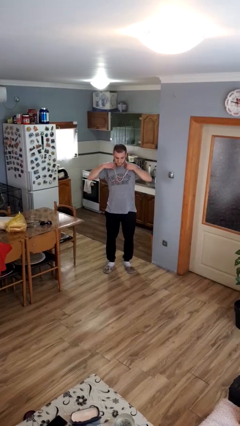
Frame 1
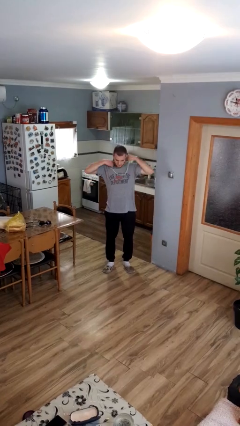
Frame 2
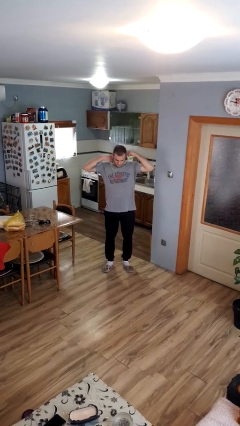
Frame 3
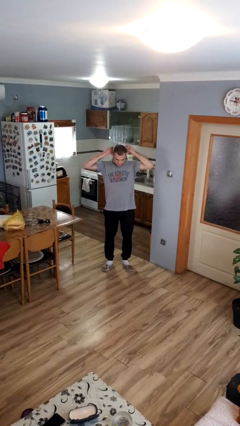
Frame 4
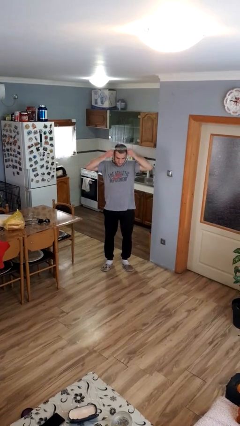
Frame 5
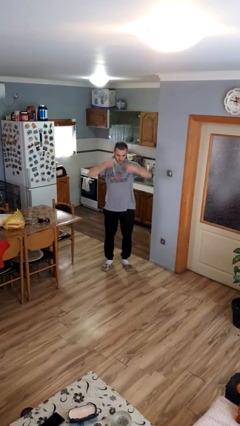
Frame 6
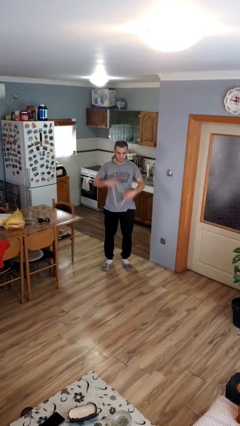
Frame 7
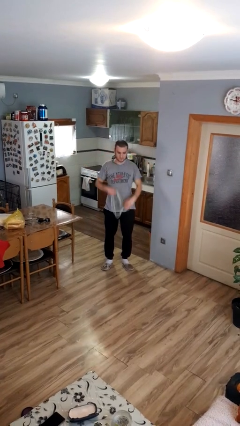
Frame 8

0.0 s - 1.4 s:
person takes off necklace

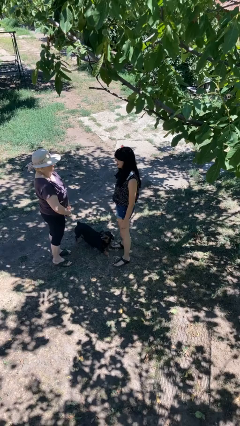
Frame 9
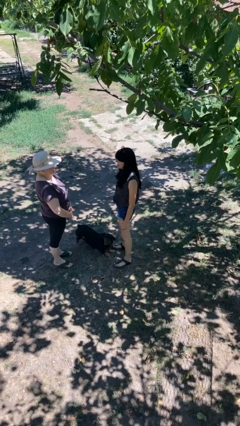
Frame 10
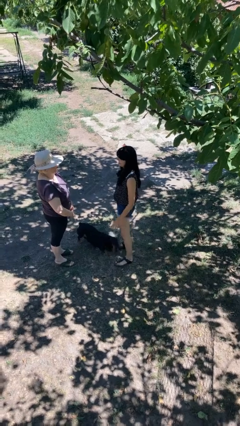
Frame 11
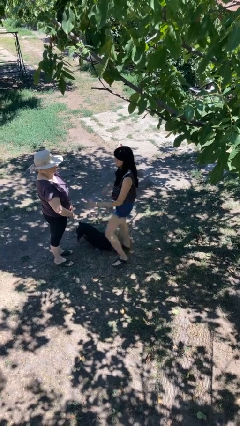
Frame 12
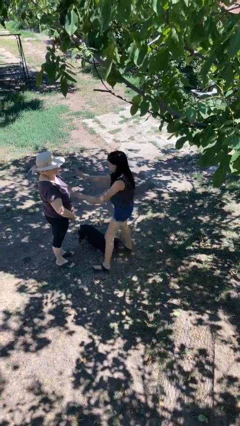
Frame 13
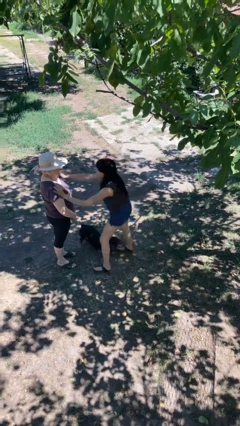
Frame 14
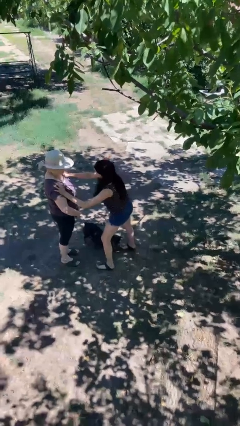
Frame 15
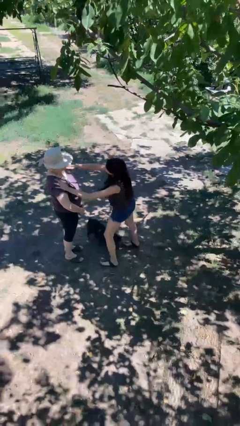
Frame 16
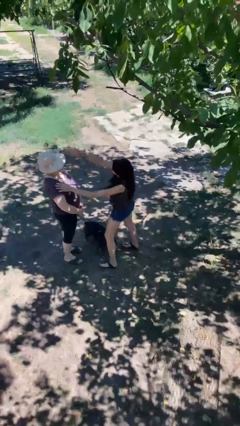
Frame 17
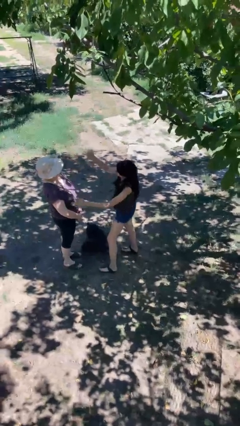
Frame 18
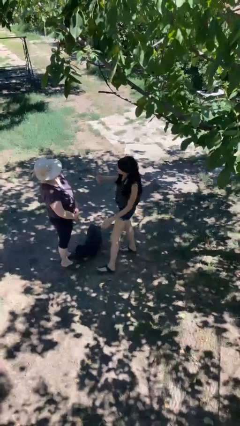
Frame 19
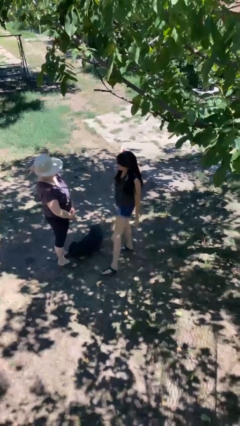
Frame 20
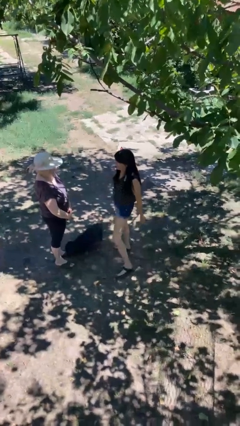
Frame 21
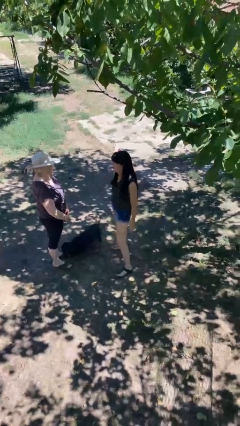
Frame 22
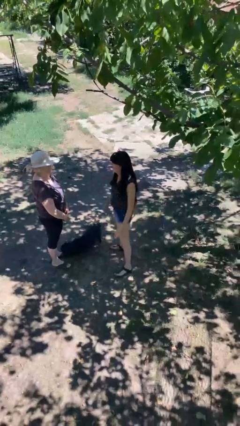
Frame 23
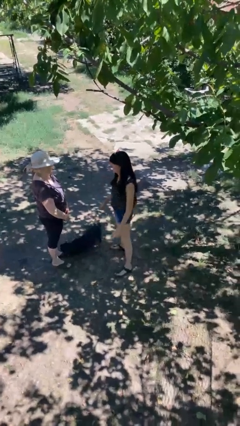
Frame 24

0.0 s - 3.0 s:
person shoves person

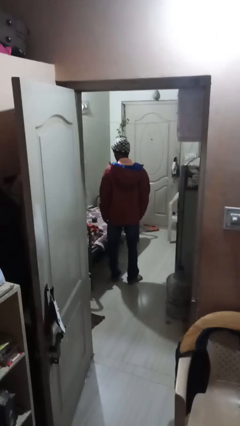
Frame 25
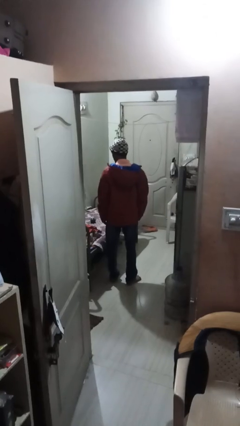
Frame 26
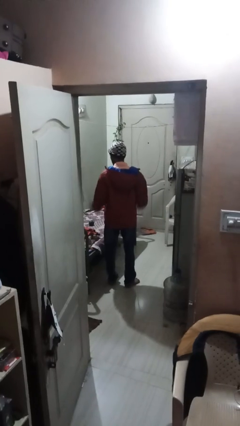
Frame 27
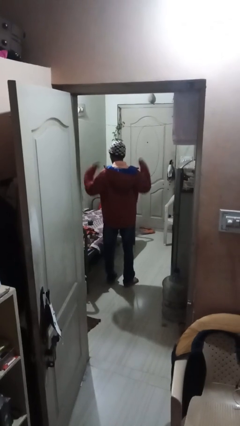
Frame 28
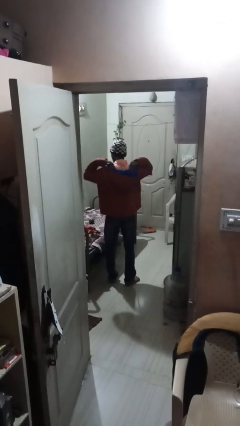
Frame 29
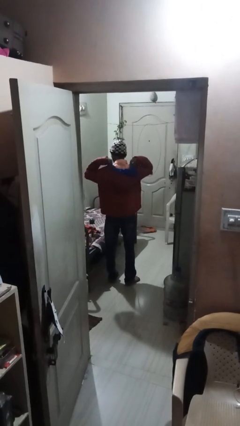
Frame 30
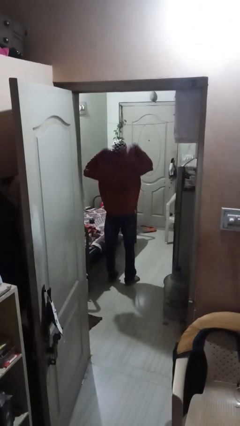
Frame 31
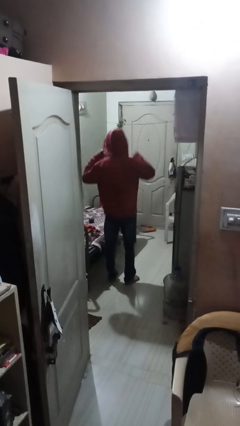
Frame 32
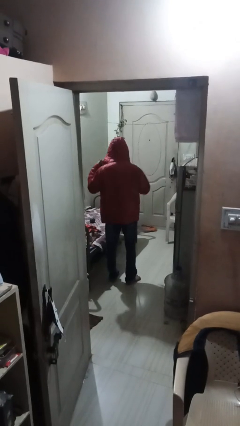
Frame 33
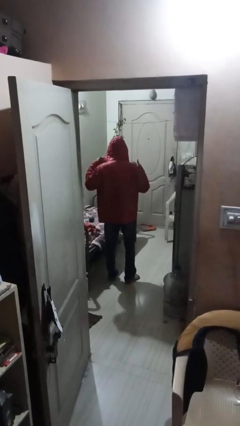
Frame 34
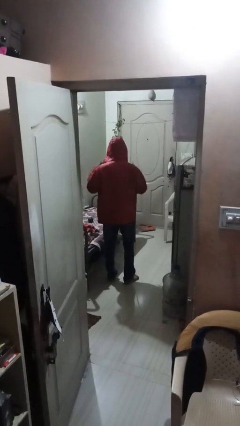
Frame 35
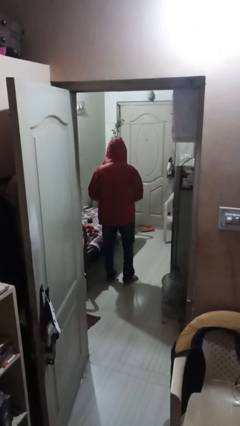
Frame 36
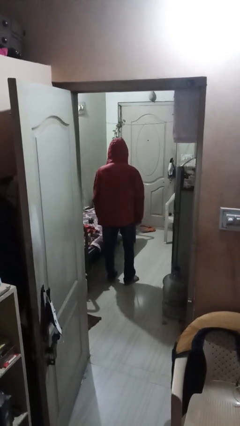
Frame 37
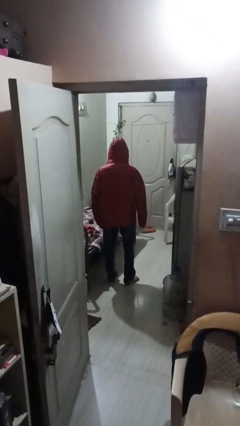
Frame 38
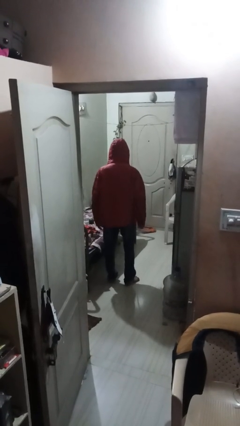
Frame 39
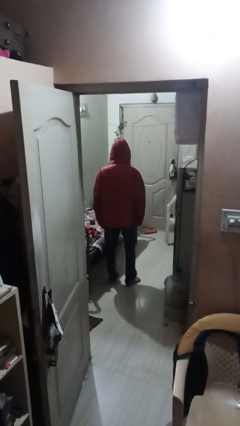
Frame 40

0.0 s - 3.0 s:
person puts on hoodie

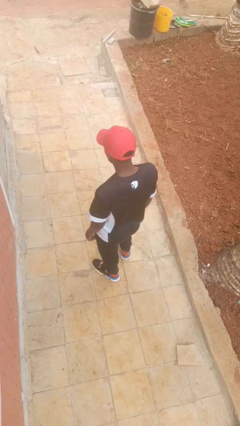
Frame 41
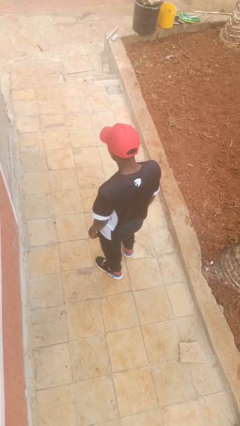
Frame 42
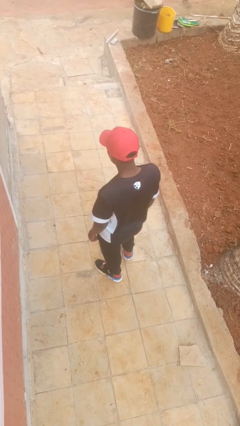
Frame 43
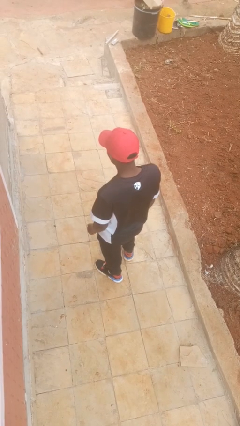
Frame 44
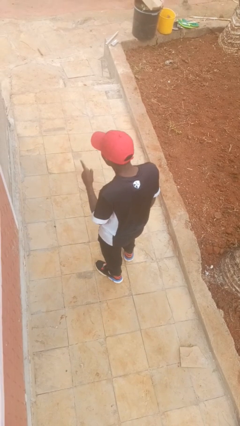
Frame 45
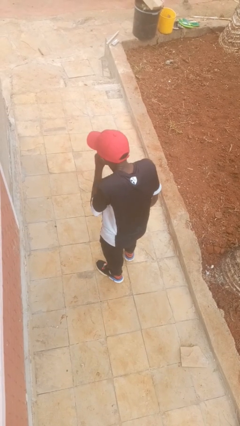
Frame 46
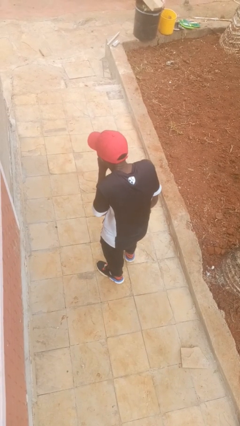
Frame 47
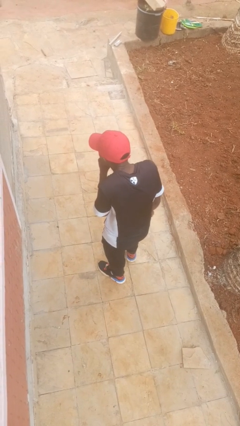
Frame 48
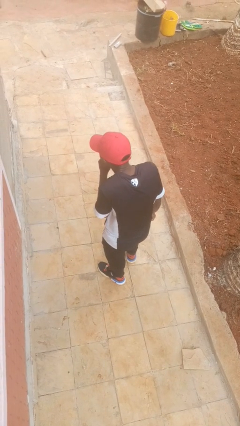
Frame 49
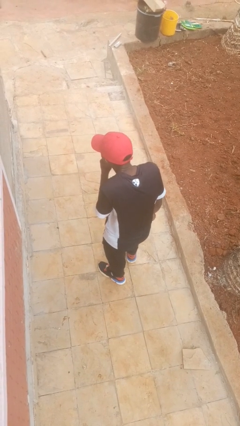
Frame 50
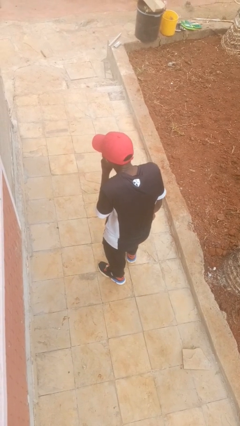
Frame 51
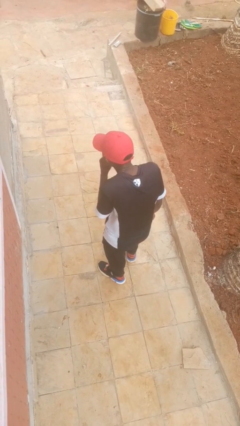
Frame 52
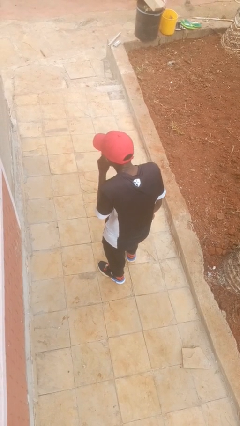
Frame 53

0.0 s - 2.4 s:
person gestures be quiet

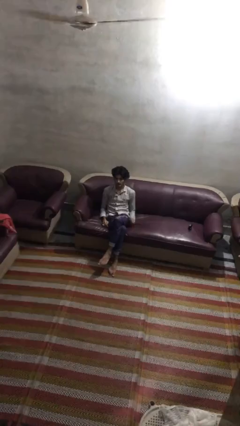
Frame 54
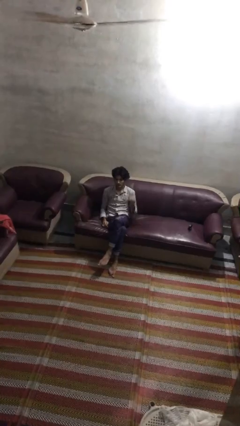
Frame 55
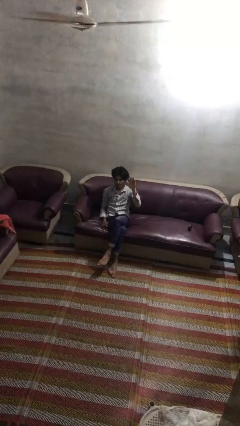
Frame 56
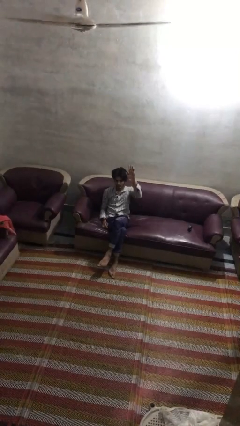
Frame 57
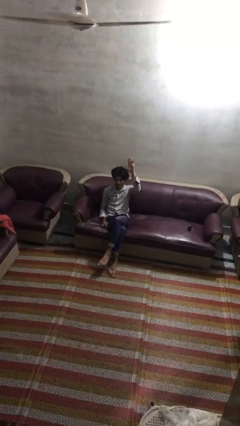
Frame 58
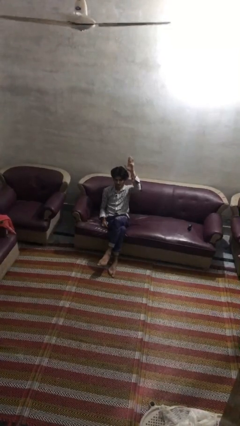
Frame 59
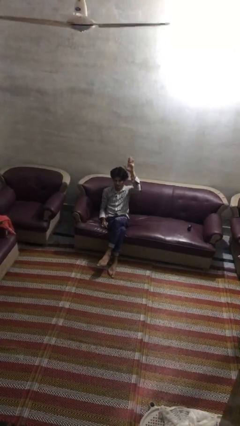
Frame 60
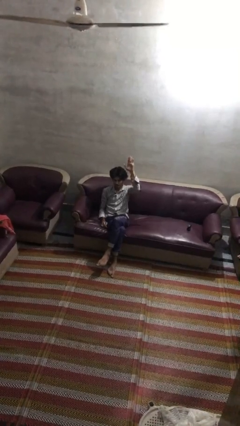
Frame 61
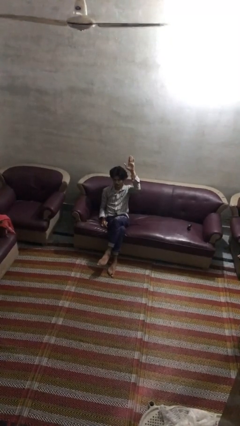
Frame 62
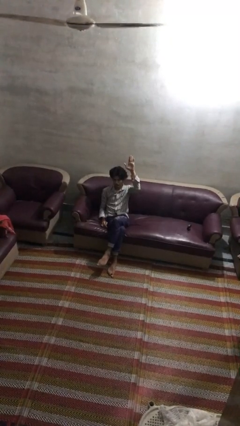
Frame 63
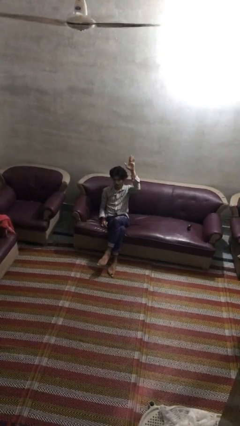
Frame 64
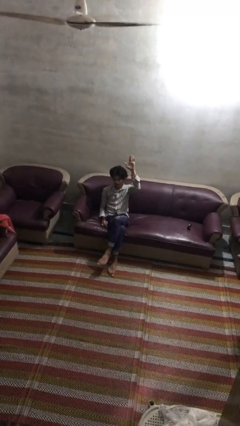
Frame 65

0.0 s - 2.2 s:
person gestures raise hand

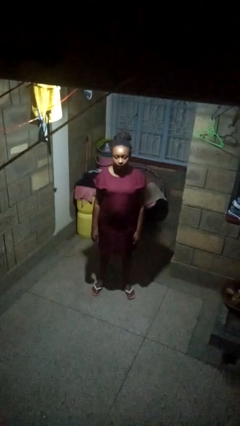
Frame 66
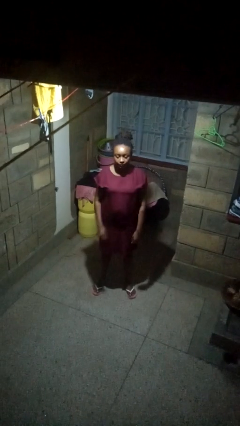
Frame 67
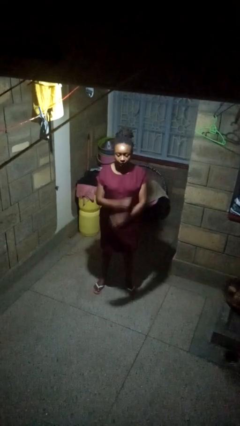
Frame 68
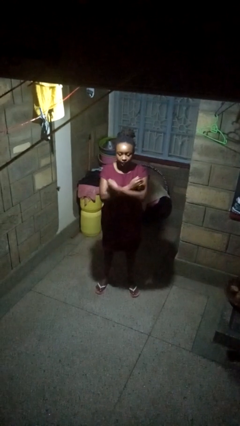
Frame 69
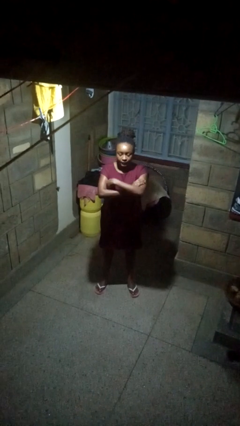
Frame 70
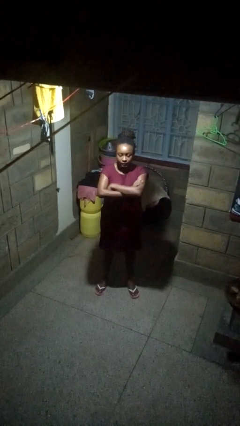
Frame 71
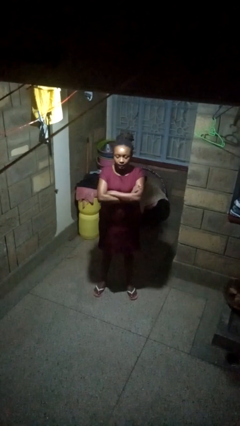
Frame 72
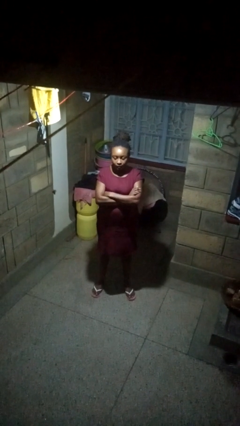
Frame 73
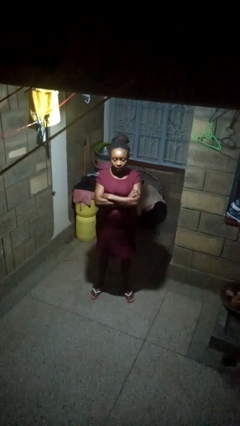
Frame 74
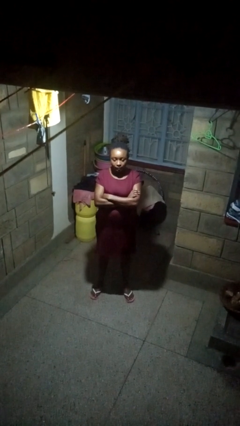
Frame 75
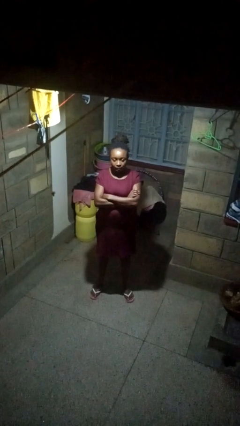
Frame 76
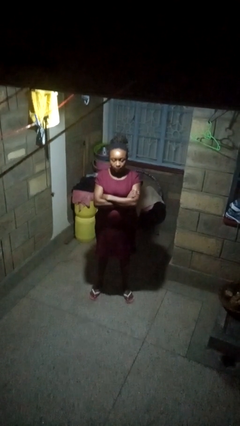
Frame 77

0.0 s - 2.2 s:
person crosses arms

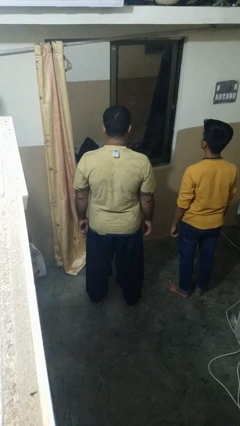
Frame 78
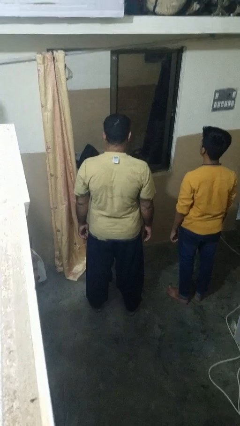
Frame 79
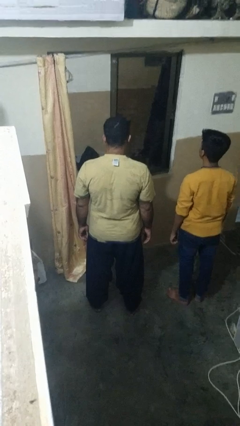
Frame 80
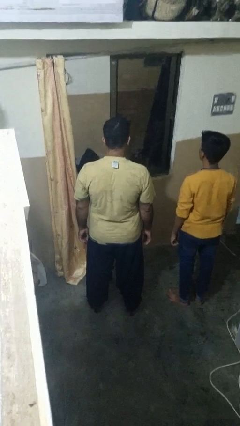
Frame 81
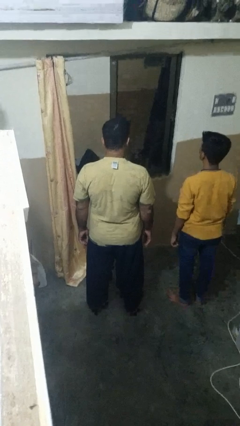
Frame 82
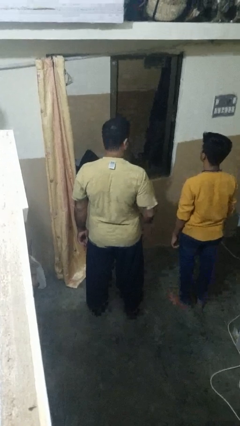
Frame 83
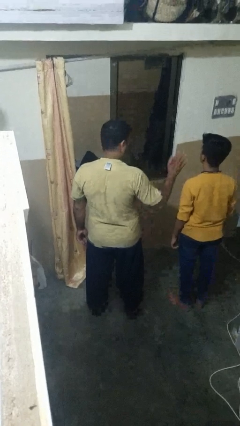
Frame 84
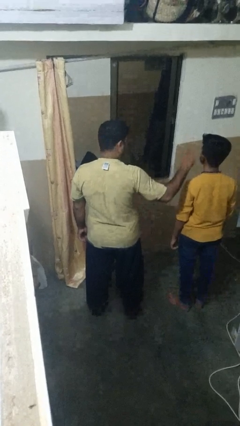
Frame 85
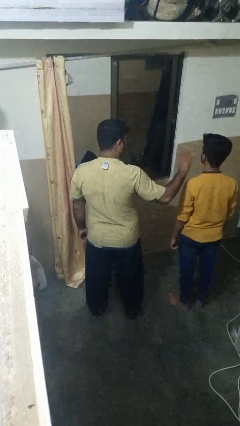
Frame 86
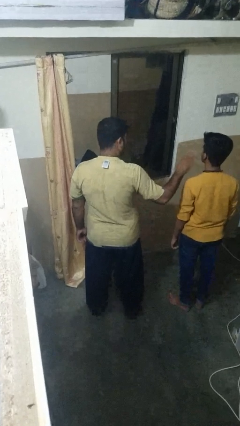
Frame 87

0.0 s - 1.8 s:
person waves at person

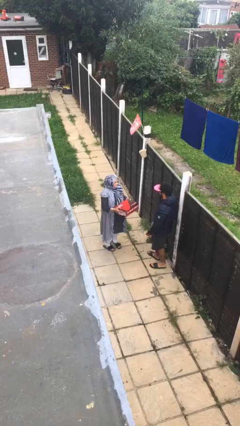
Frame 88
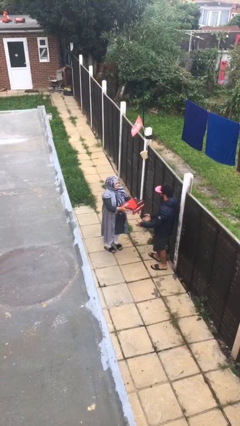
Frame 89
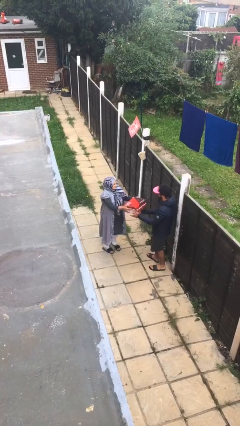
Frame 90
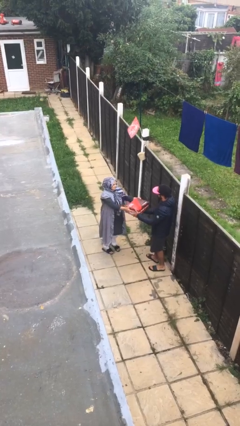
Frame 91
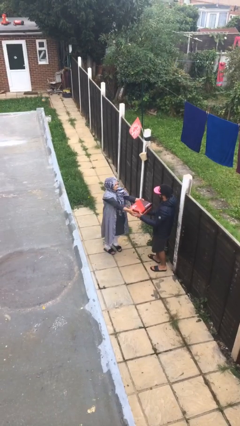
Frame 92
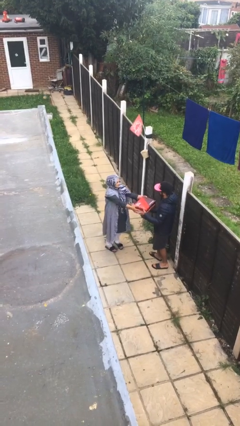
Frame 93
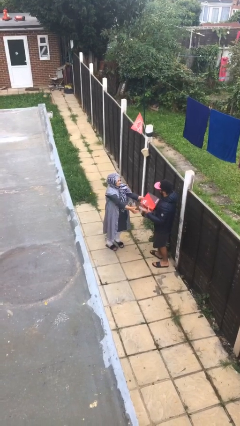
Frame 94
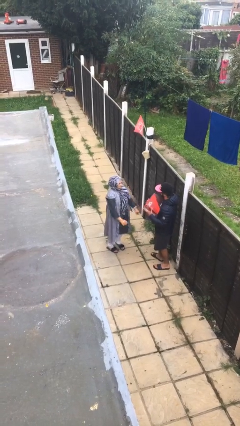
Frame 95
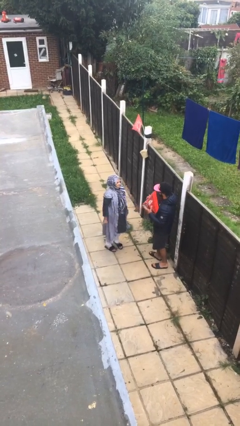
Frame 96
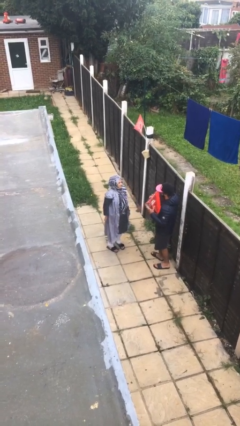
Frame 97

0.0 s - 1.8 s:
person transfers object to person
